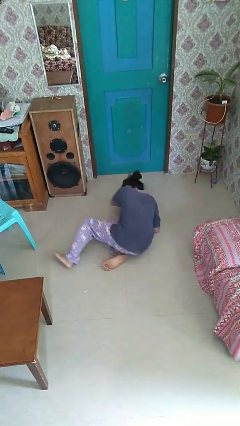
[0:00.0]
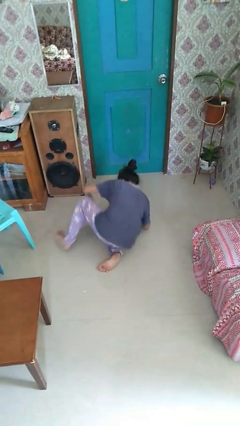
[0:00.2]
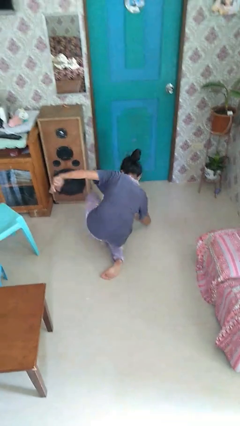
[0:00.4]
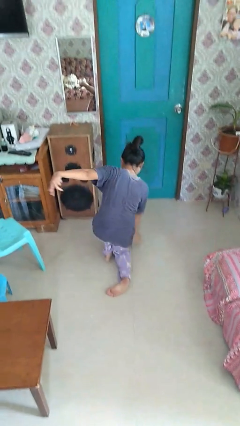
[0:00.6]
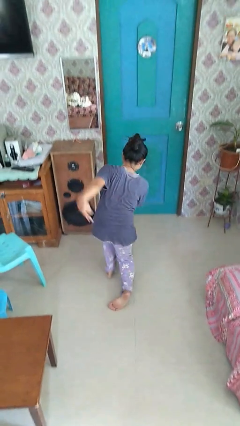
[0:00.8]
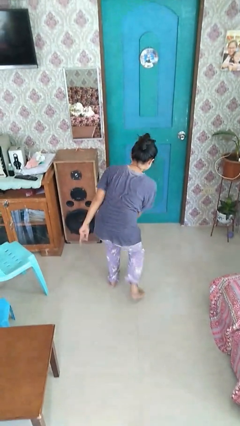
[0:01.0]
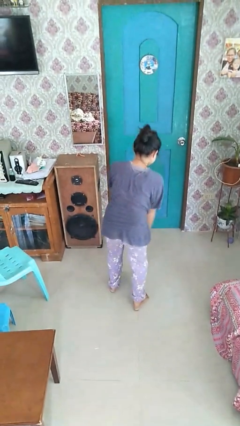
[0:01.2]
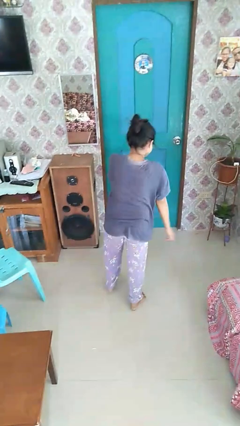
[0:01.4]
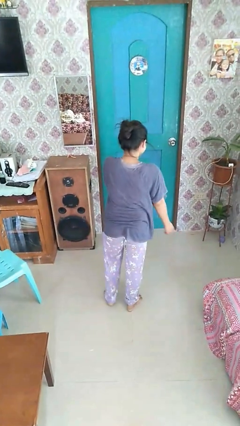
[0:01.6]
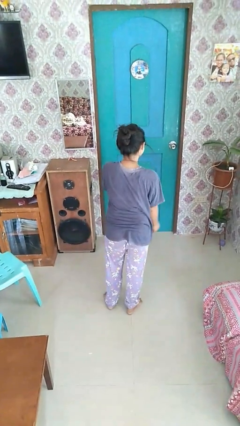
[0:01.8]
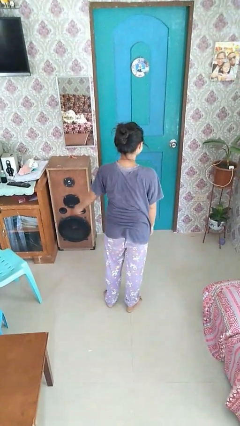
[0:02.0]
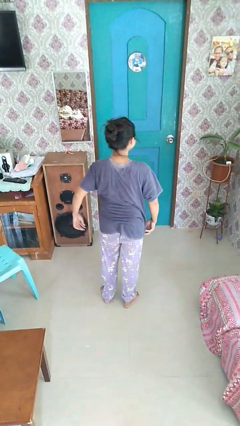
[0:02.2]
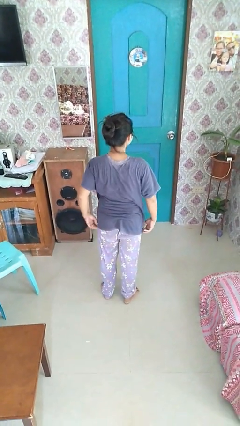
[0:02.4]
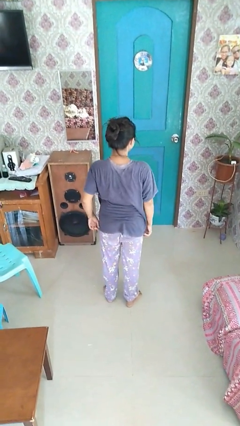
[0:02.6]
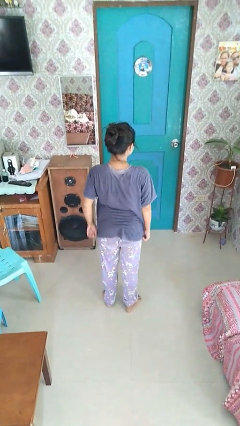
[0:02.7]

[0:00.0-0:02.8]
person stands up from floor

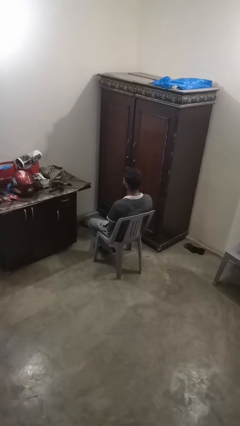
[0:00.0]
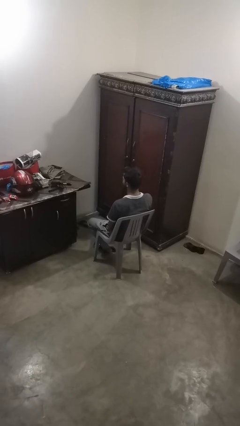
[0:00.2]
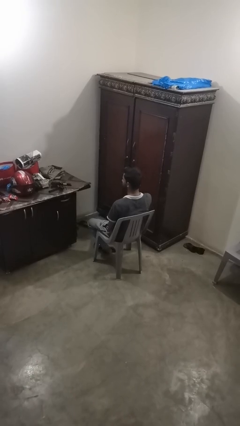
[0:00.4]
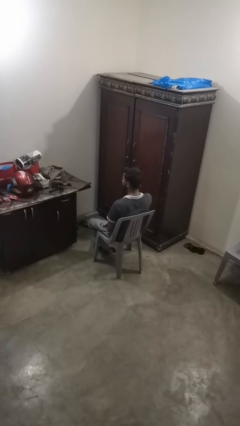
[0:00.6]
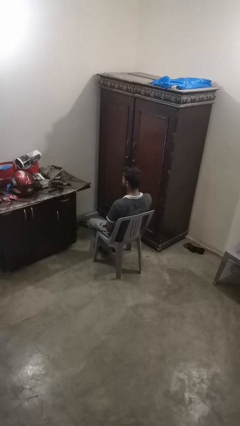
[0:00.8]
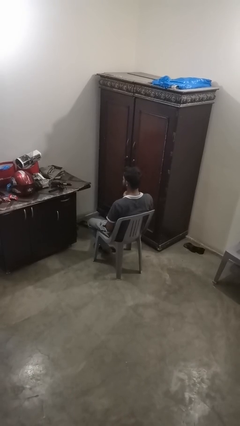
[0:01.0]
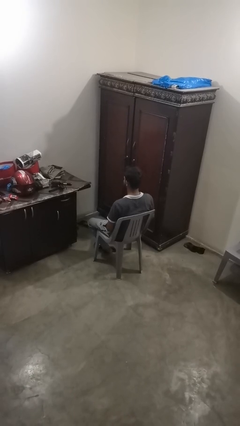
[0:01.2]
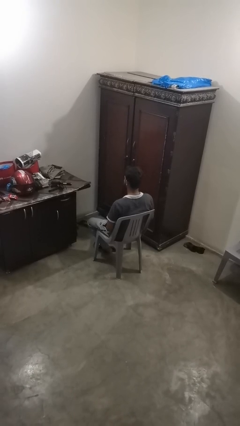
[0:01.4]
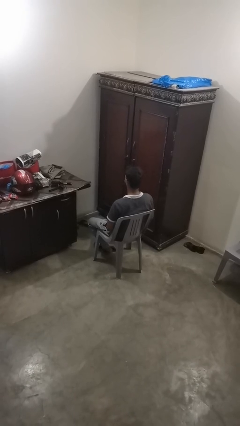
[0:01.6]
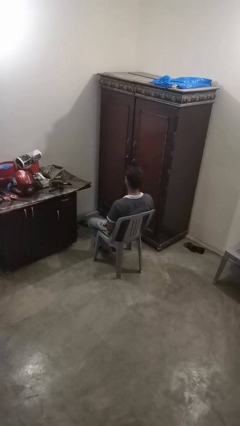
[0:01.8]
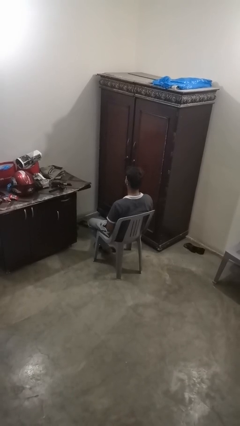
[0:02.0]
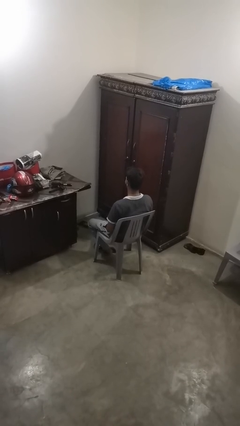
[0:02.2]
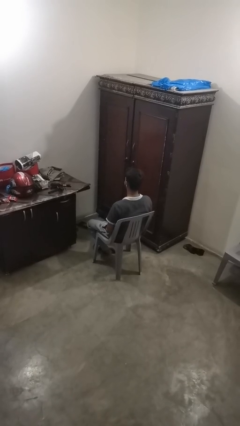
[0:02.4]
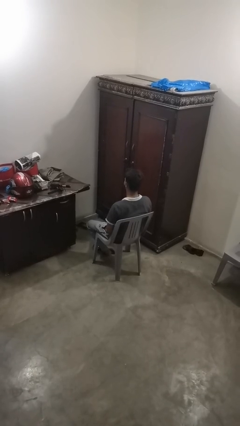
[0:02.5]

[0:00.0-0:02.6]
person takes off earrings

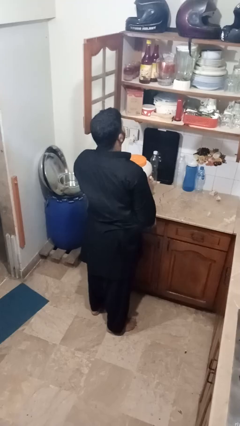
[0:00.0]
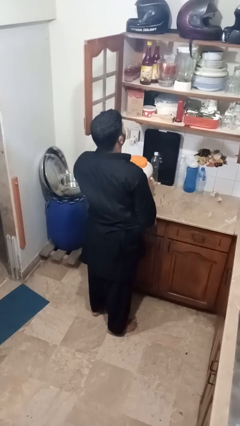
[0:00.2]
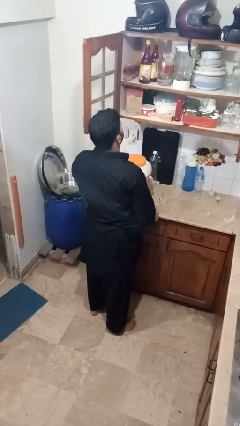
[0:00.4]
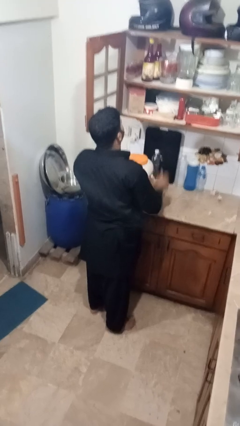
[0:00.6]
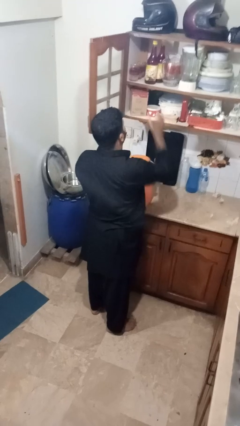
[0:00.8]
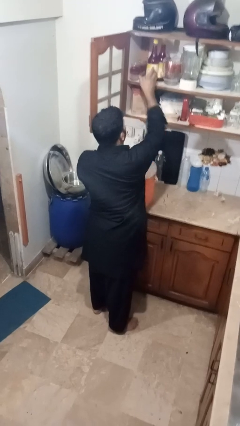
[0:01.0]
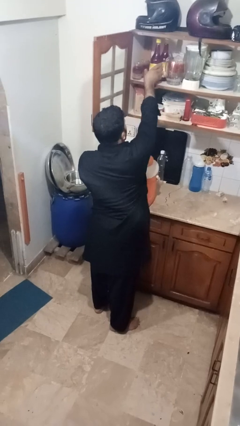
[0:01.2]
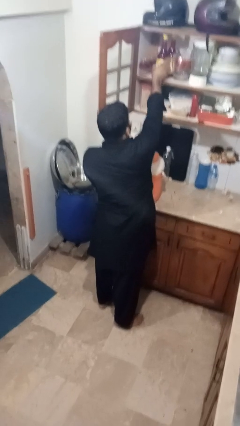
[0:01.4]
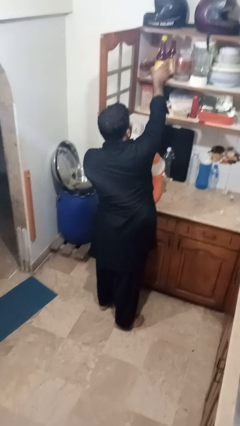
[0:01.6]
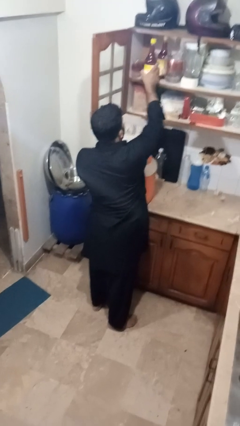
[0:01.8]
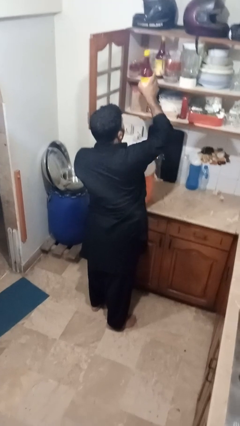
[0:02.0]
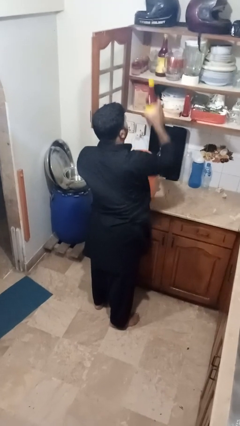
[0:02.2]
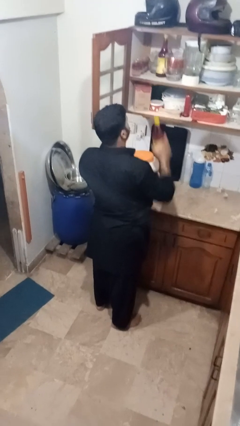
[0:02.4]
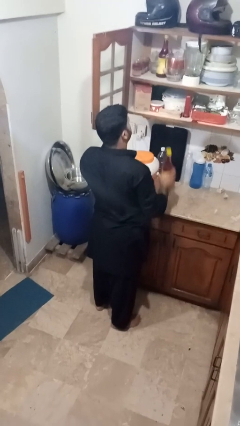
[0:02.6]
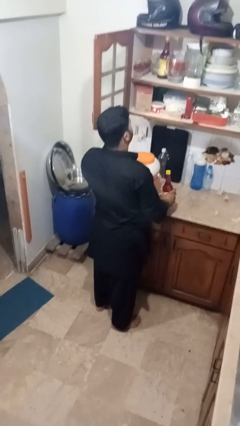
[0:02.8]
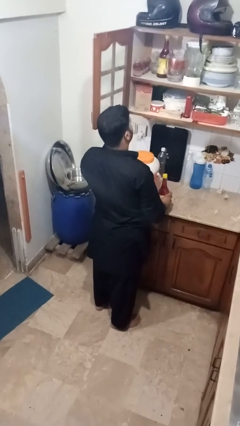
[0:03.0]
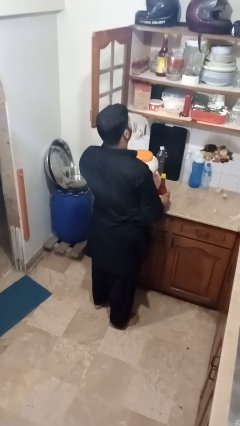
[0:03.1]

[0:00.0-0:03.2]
person picks up object from cabinet

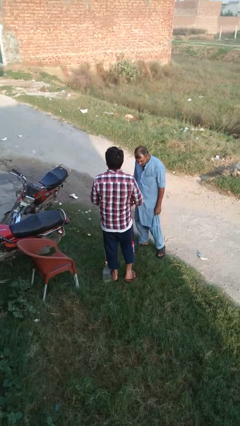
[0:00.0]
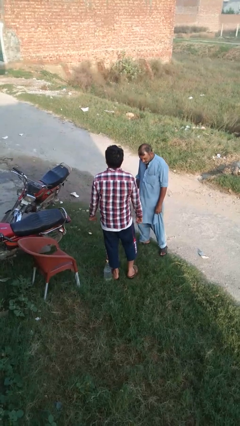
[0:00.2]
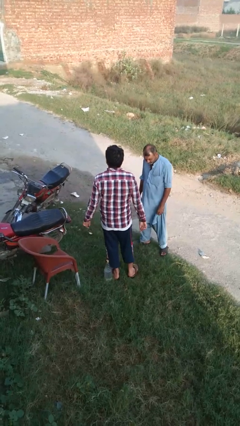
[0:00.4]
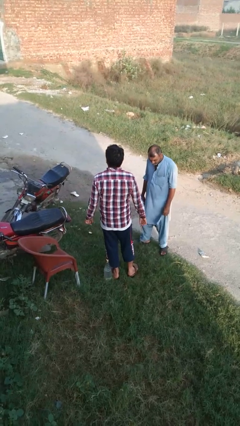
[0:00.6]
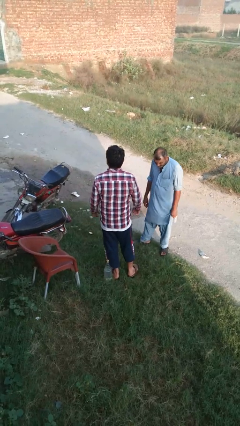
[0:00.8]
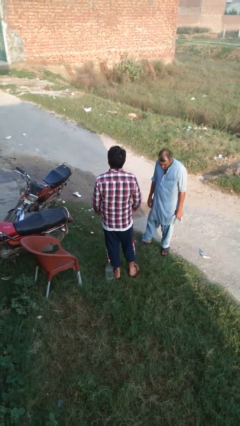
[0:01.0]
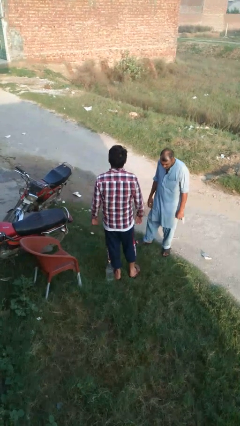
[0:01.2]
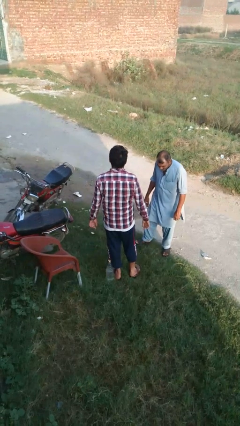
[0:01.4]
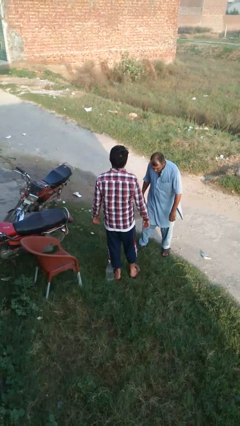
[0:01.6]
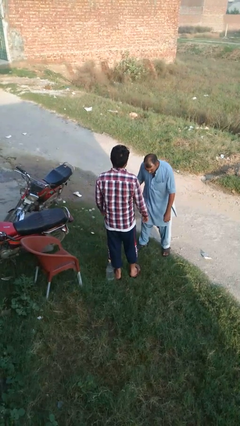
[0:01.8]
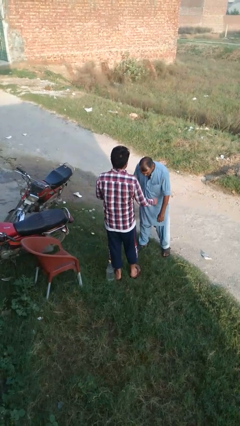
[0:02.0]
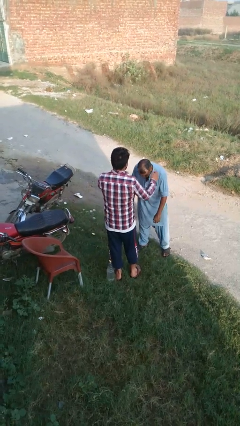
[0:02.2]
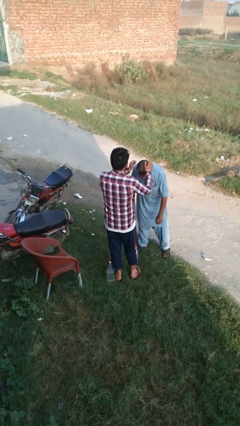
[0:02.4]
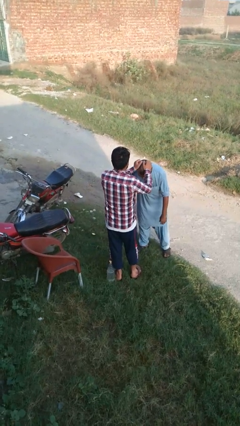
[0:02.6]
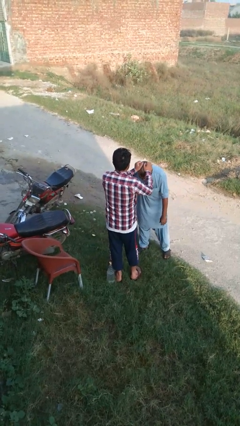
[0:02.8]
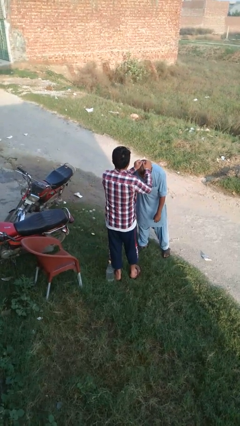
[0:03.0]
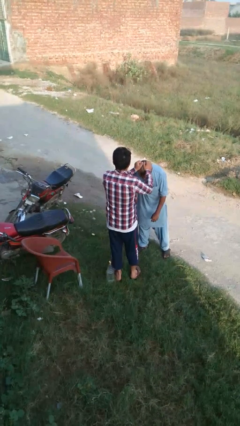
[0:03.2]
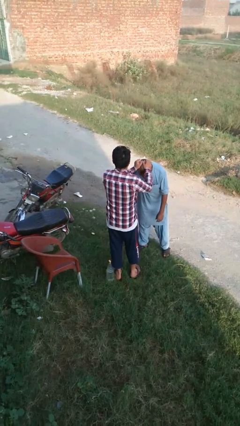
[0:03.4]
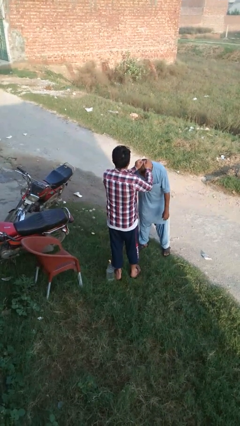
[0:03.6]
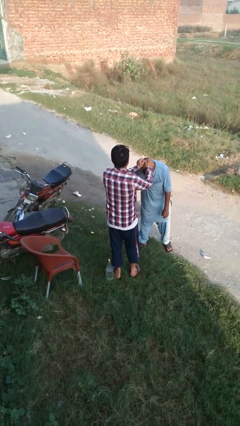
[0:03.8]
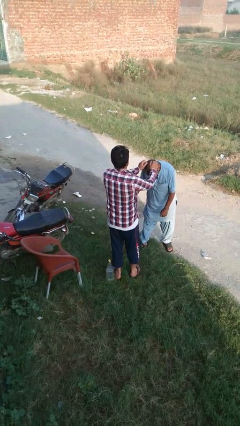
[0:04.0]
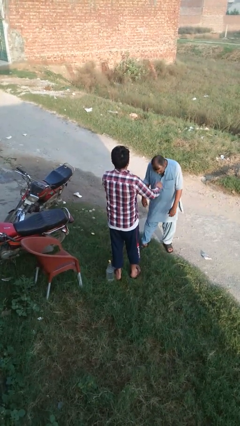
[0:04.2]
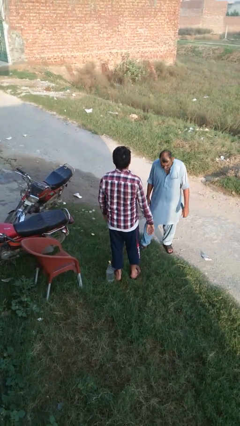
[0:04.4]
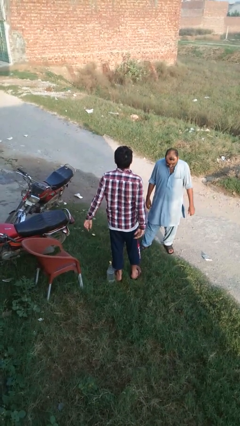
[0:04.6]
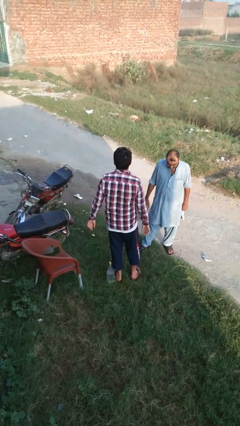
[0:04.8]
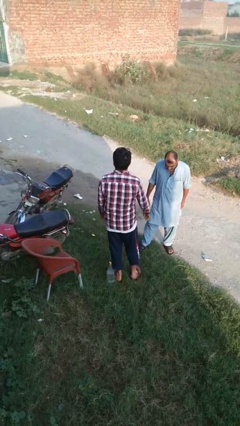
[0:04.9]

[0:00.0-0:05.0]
person grabs person by hair

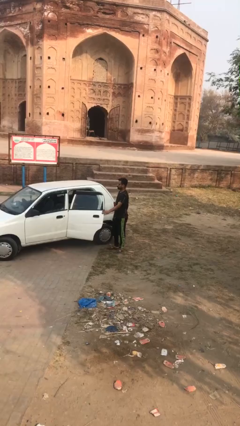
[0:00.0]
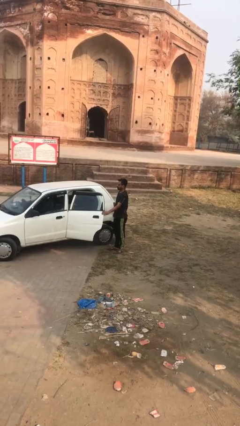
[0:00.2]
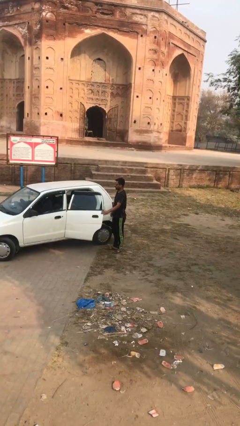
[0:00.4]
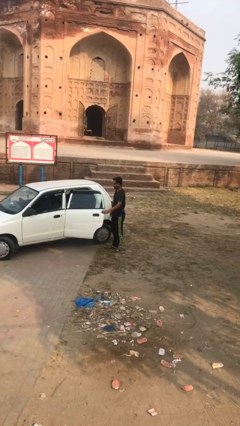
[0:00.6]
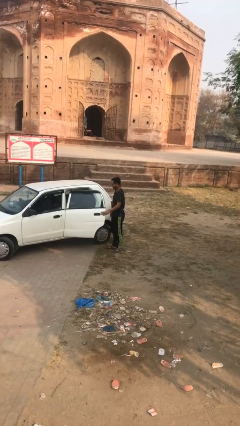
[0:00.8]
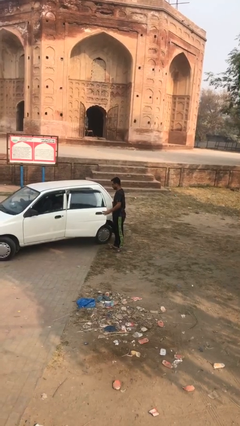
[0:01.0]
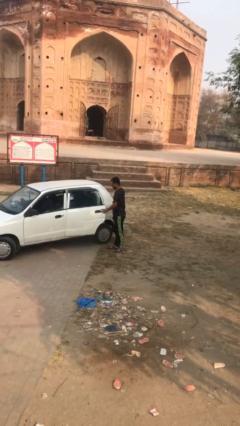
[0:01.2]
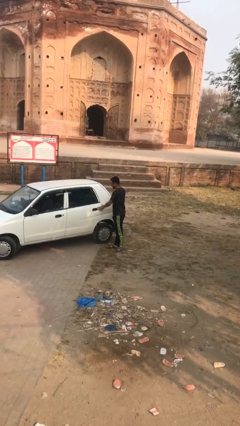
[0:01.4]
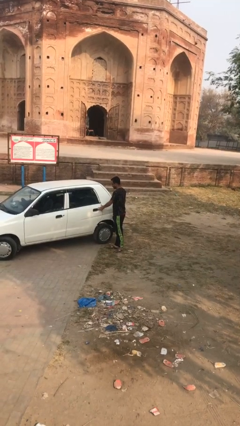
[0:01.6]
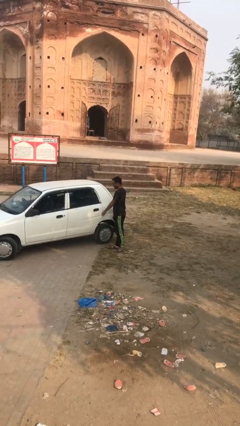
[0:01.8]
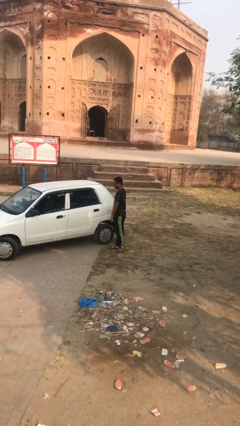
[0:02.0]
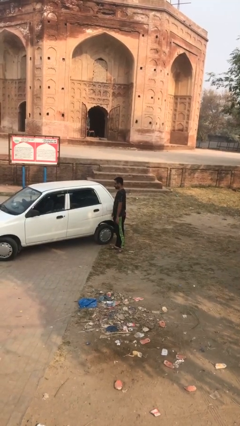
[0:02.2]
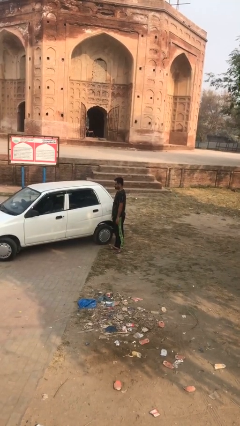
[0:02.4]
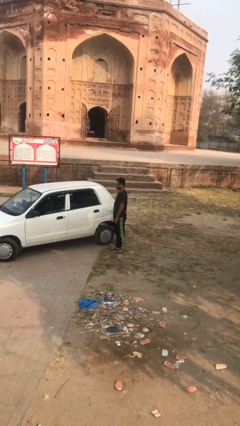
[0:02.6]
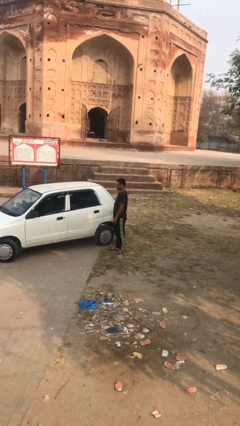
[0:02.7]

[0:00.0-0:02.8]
person closes car door

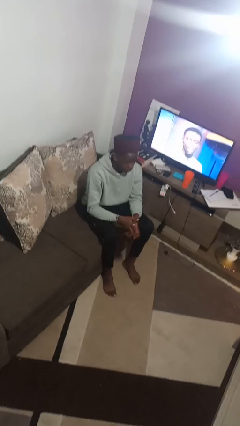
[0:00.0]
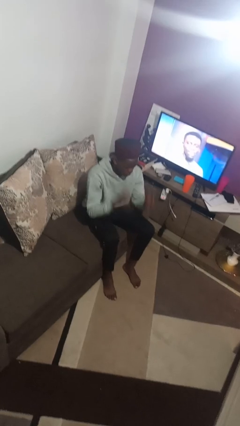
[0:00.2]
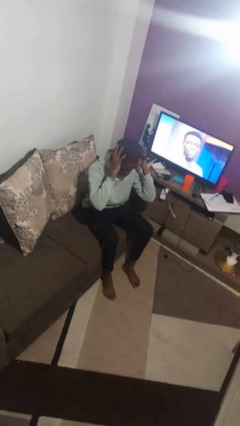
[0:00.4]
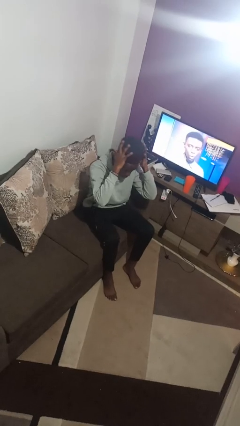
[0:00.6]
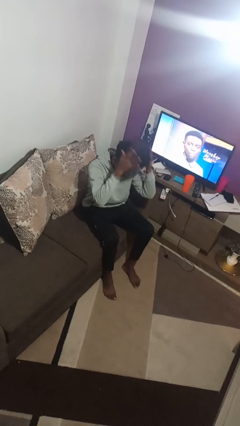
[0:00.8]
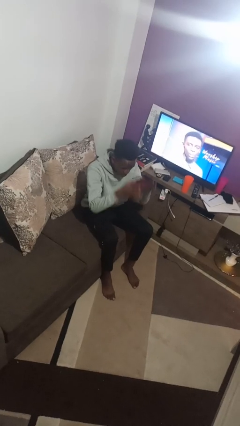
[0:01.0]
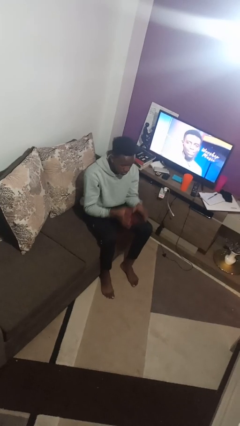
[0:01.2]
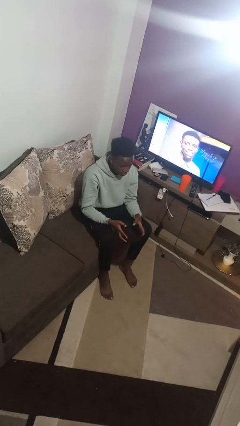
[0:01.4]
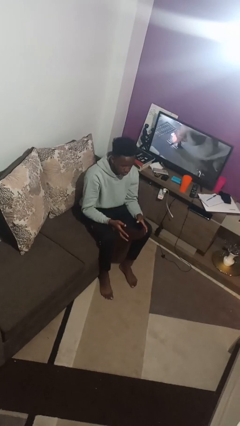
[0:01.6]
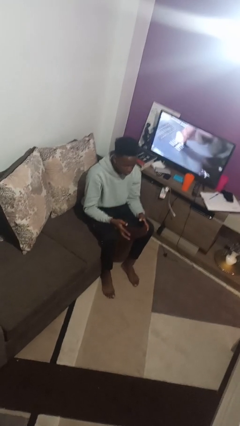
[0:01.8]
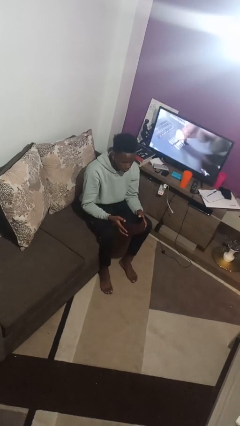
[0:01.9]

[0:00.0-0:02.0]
person takes off hat
